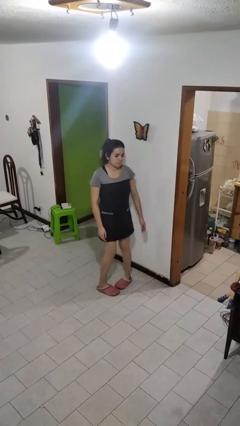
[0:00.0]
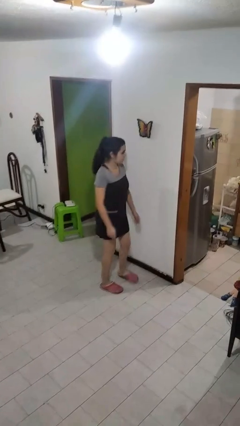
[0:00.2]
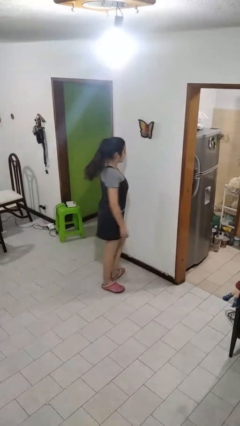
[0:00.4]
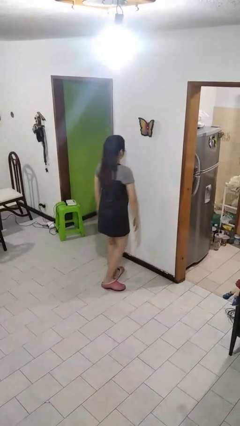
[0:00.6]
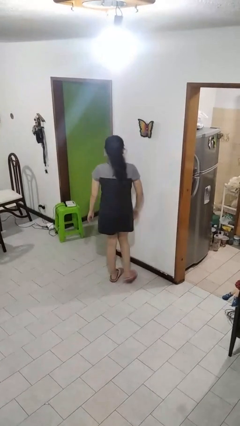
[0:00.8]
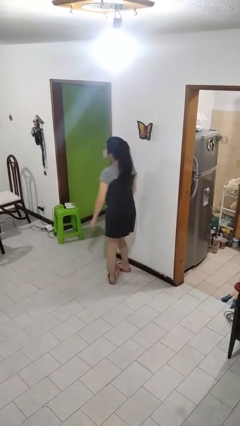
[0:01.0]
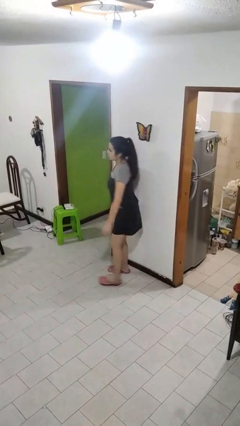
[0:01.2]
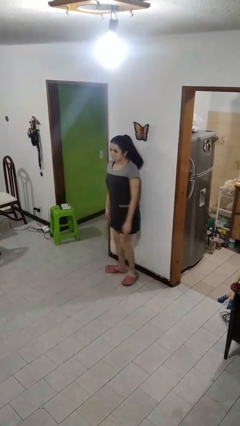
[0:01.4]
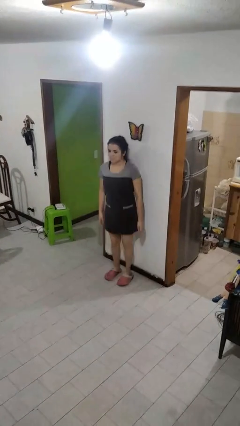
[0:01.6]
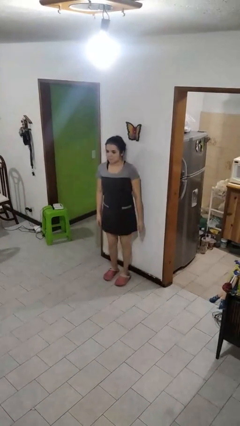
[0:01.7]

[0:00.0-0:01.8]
person twirls

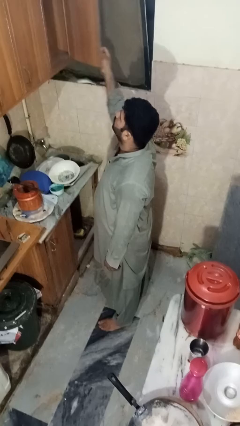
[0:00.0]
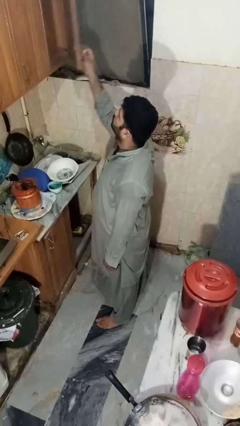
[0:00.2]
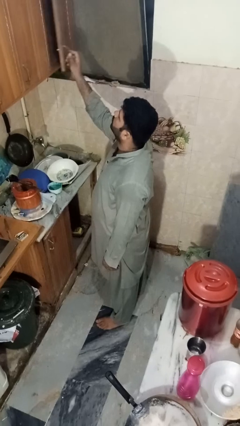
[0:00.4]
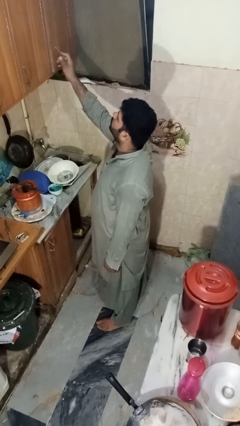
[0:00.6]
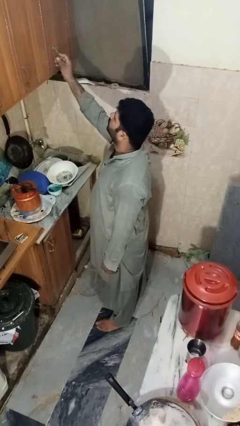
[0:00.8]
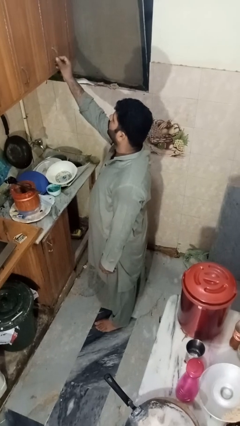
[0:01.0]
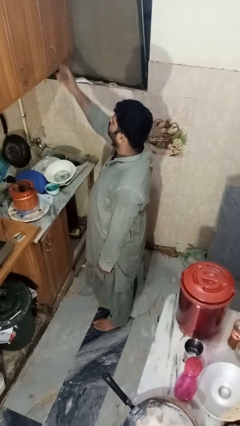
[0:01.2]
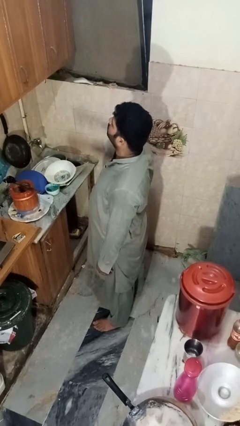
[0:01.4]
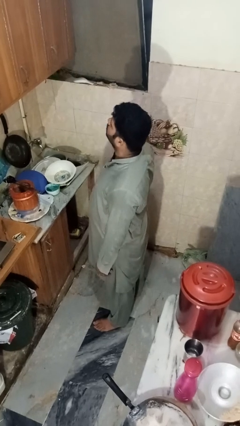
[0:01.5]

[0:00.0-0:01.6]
person closes cabinet

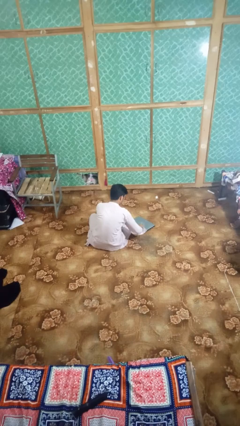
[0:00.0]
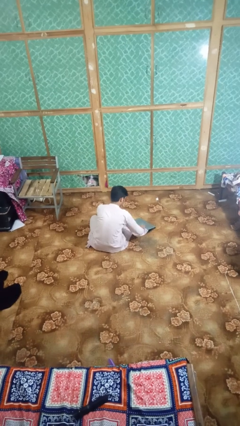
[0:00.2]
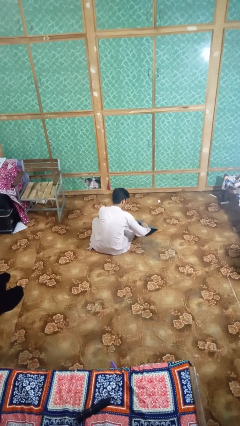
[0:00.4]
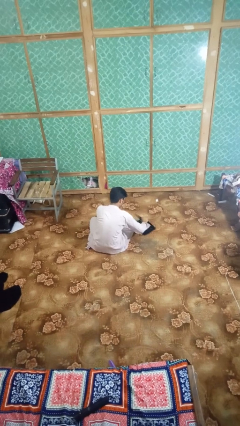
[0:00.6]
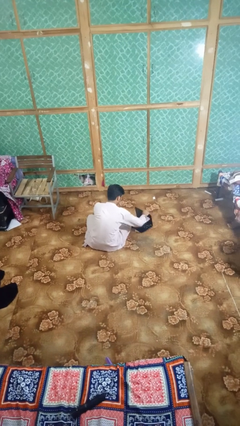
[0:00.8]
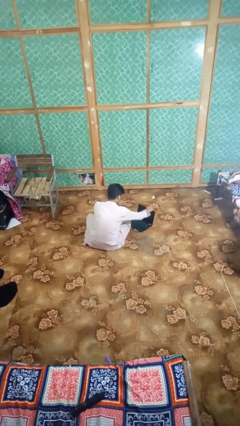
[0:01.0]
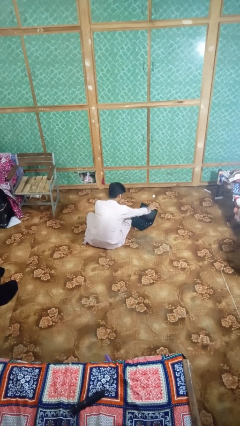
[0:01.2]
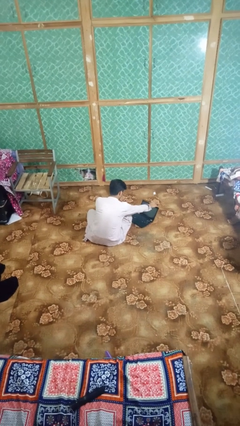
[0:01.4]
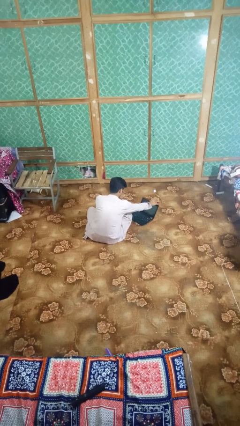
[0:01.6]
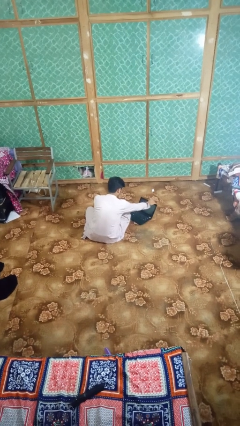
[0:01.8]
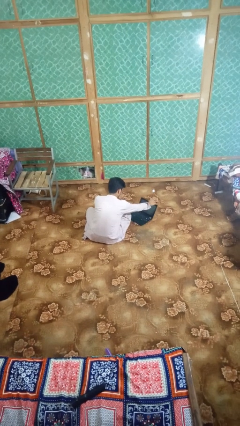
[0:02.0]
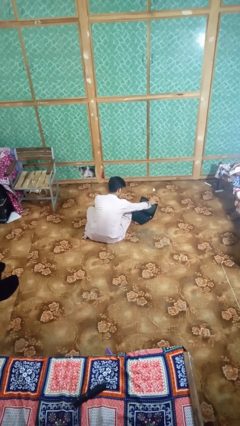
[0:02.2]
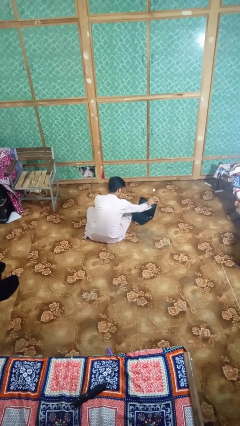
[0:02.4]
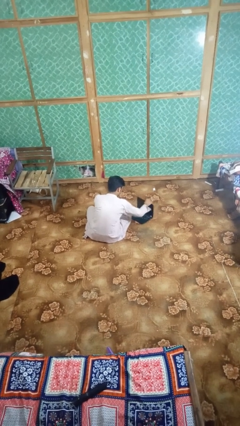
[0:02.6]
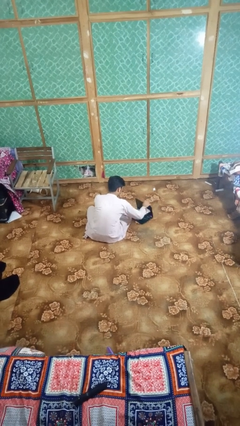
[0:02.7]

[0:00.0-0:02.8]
person opens laptop

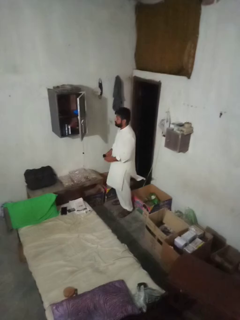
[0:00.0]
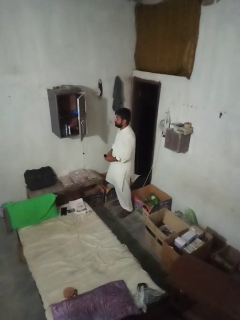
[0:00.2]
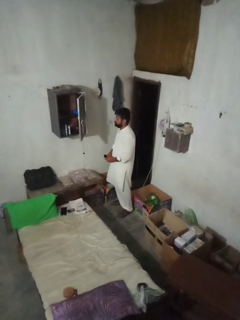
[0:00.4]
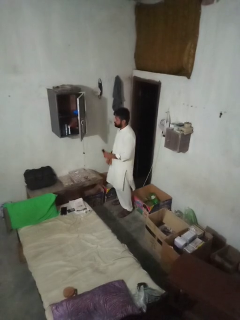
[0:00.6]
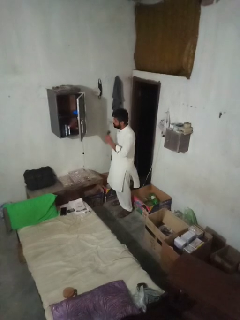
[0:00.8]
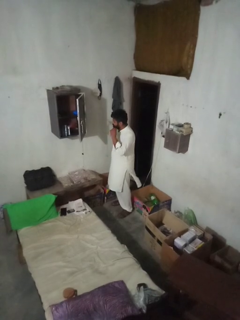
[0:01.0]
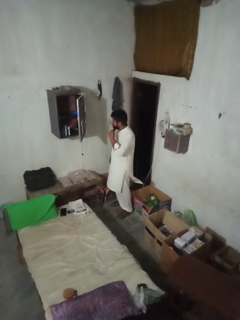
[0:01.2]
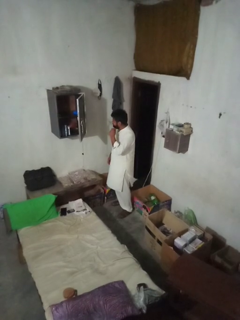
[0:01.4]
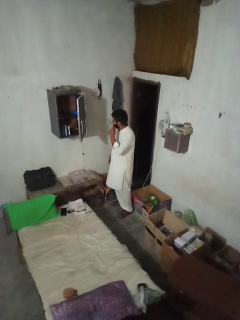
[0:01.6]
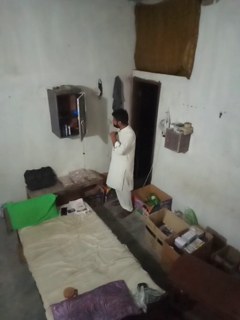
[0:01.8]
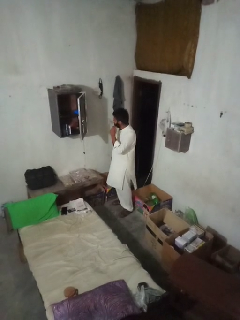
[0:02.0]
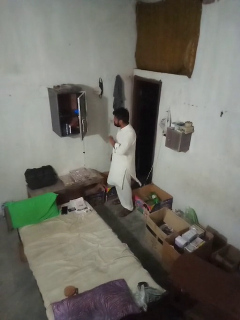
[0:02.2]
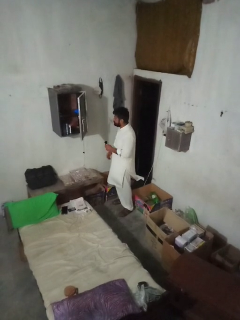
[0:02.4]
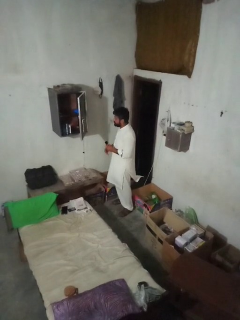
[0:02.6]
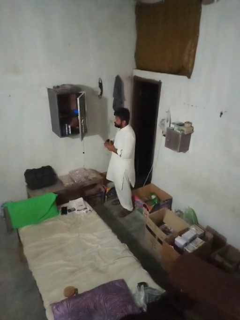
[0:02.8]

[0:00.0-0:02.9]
person applies foundation makeup

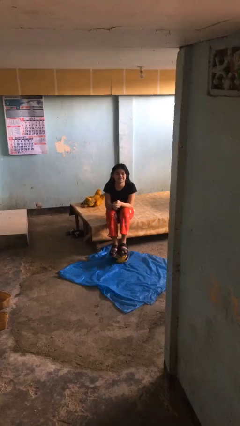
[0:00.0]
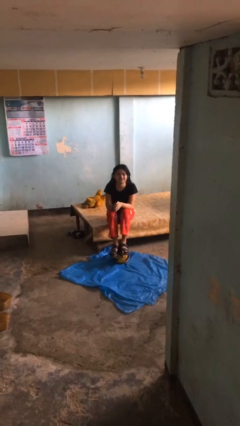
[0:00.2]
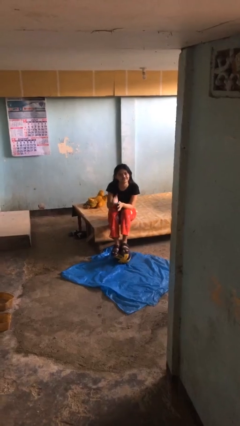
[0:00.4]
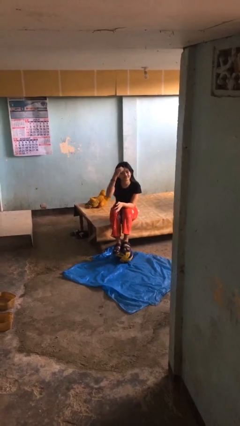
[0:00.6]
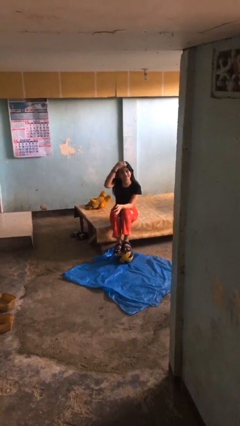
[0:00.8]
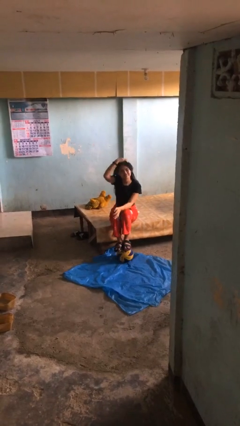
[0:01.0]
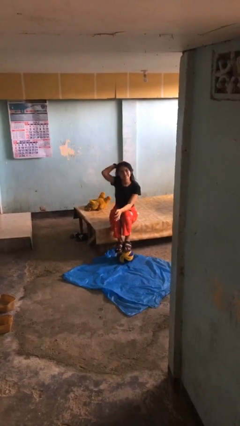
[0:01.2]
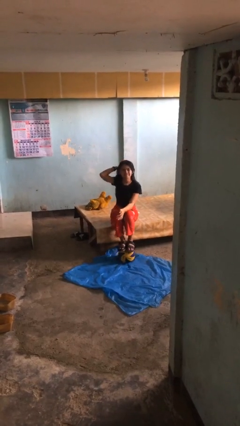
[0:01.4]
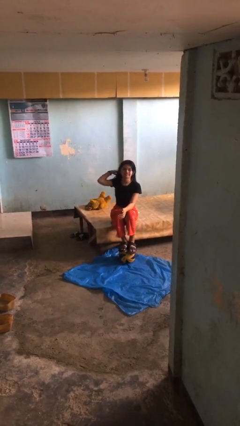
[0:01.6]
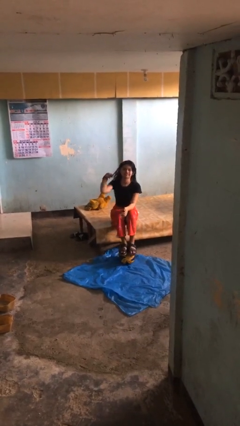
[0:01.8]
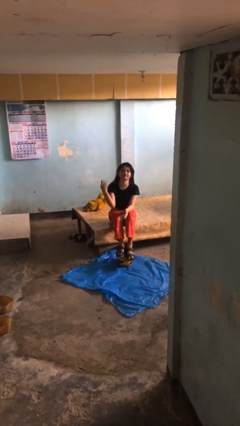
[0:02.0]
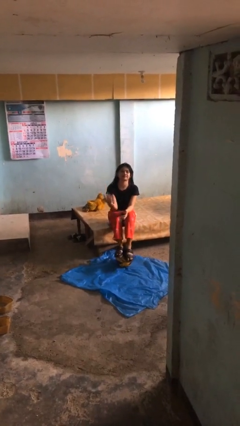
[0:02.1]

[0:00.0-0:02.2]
person strokes hair

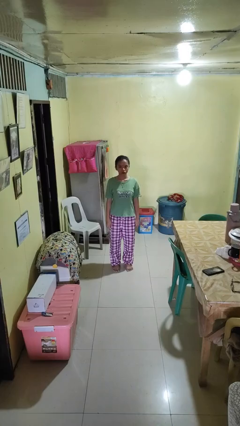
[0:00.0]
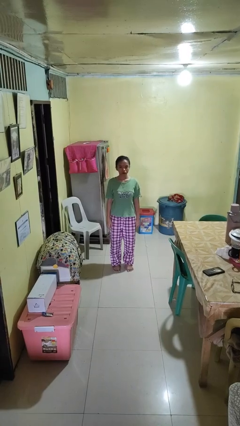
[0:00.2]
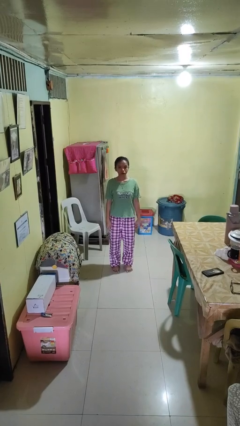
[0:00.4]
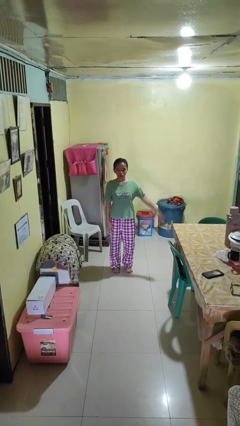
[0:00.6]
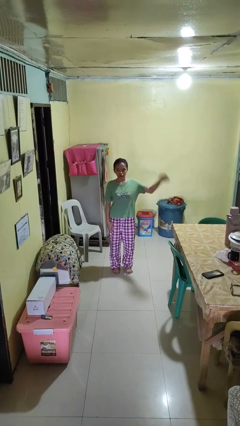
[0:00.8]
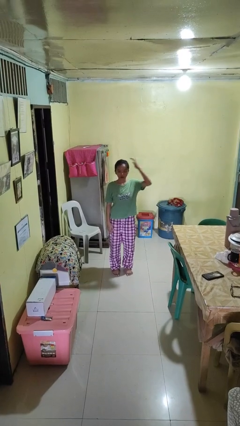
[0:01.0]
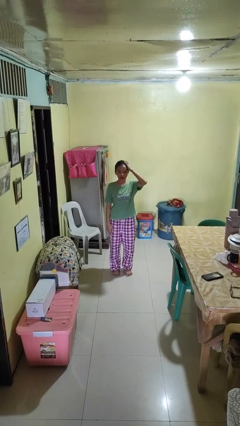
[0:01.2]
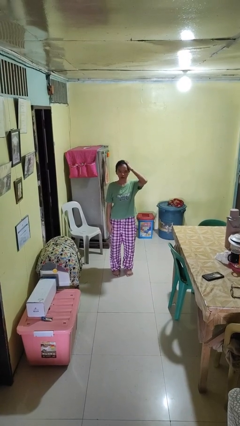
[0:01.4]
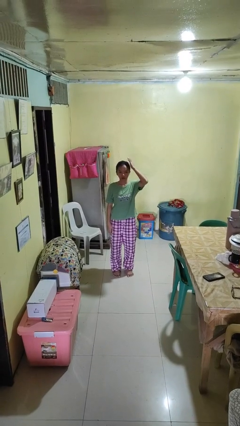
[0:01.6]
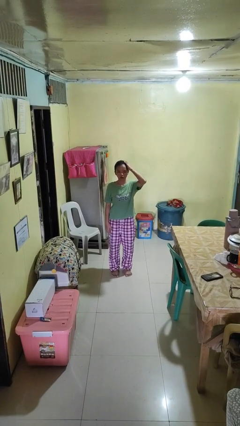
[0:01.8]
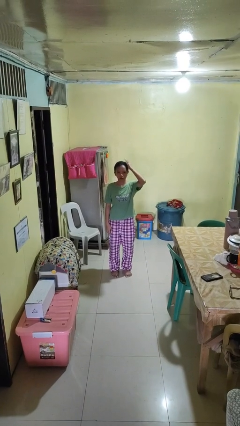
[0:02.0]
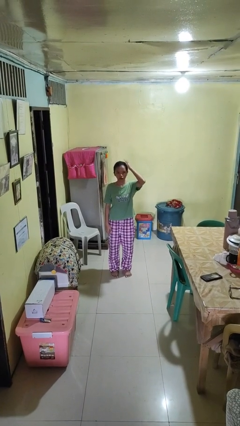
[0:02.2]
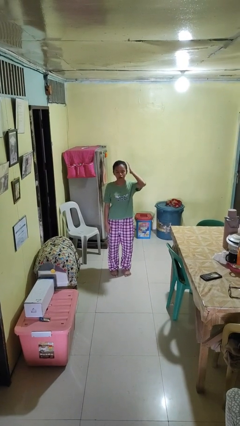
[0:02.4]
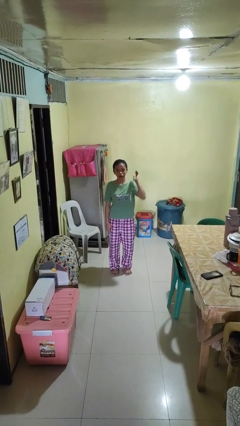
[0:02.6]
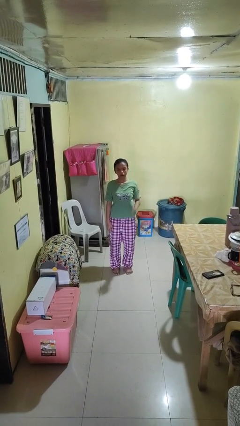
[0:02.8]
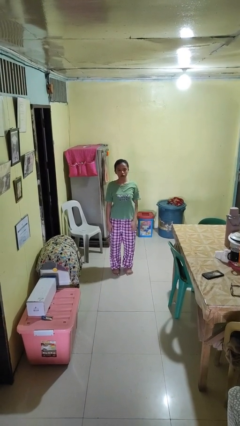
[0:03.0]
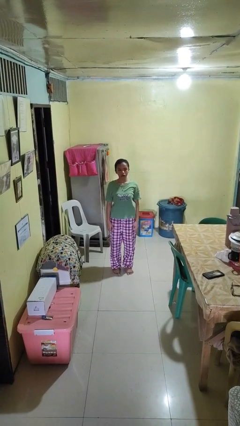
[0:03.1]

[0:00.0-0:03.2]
person pats head

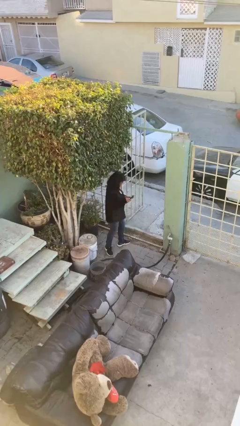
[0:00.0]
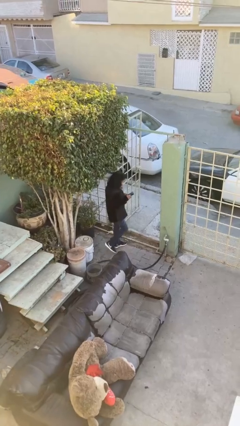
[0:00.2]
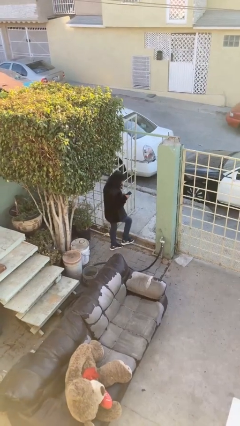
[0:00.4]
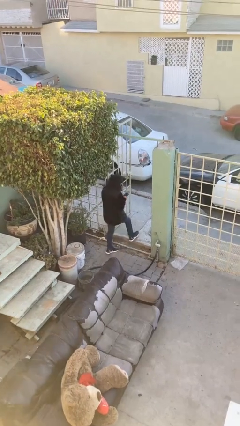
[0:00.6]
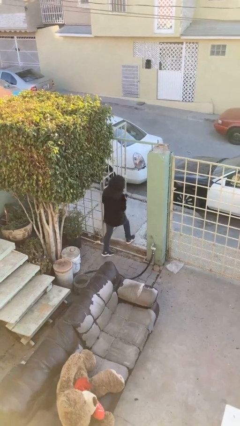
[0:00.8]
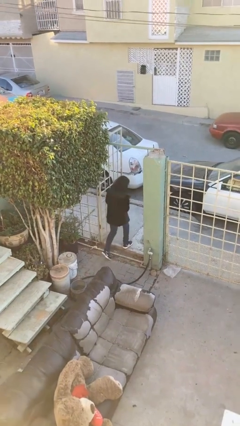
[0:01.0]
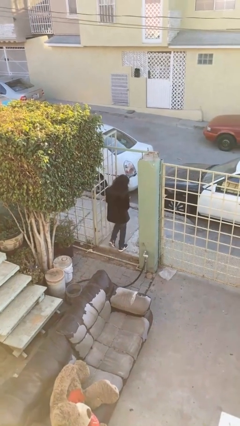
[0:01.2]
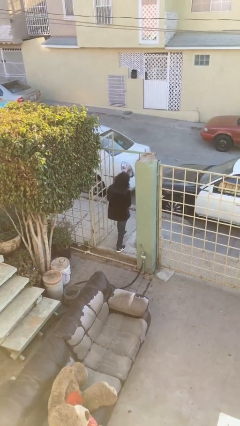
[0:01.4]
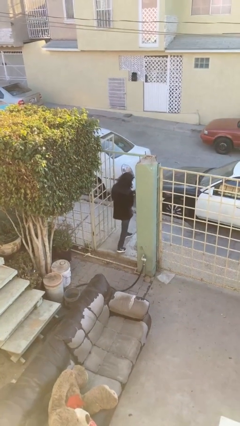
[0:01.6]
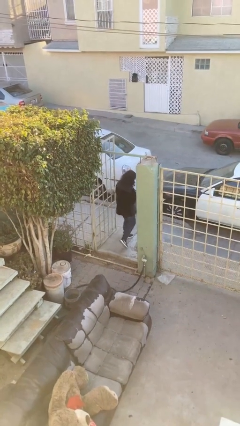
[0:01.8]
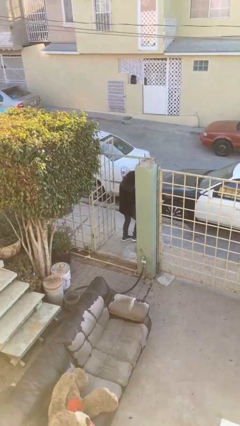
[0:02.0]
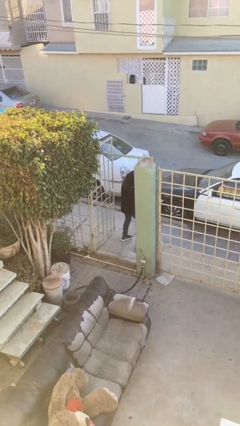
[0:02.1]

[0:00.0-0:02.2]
person exits scene through structure
